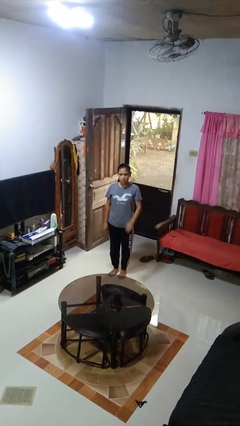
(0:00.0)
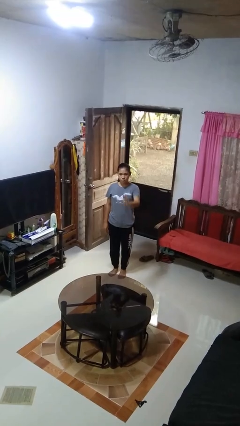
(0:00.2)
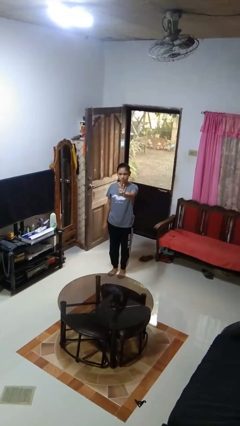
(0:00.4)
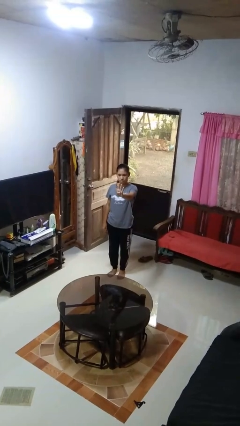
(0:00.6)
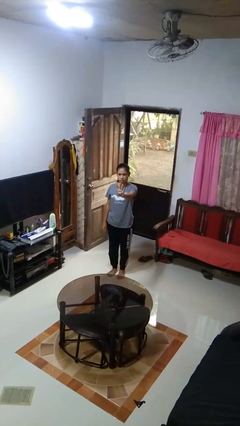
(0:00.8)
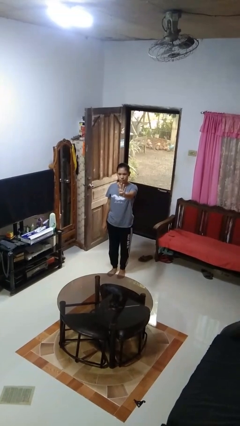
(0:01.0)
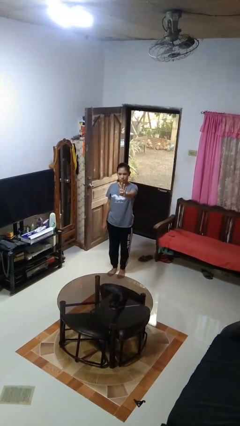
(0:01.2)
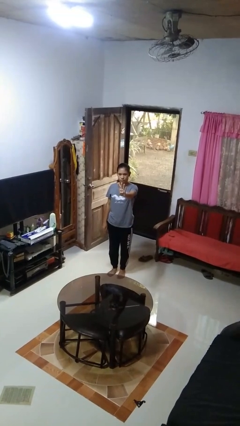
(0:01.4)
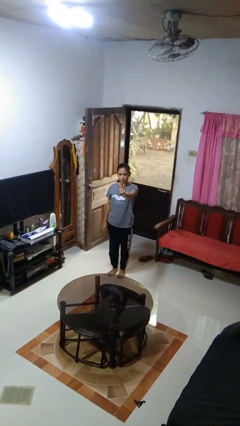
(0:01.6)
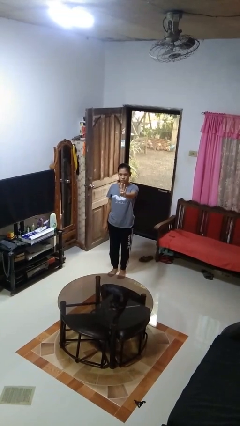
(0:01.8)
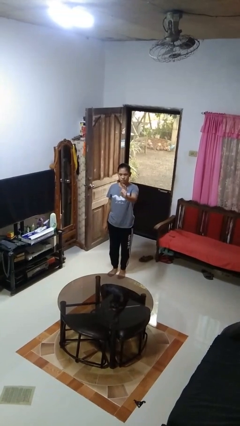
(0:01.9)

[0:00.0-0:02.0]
person gestures number four

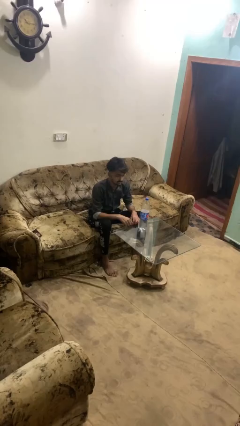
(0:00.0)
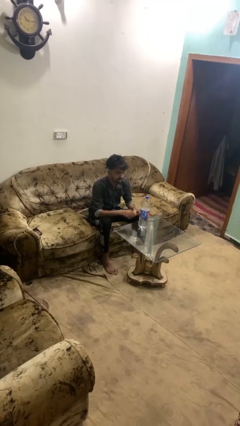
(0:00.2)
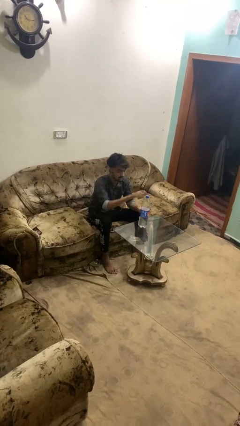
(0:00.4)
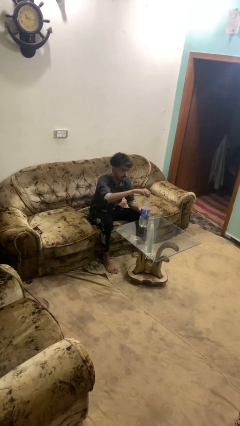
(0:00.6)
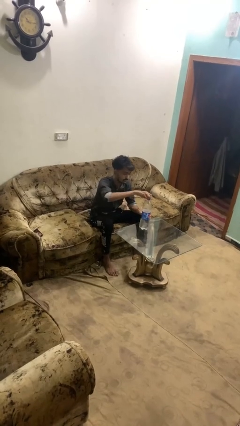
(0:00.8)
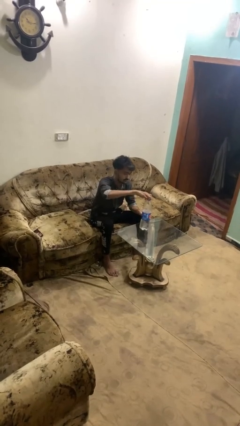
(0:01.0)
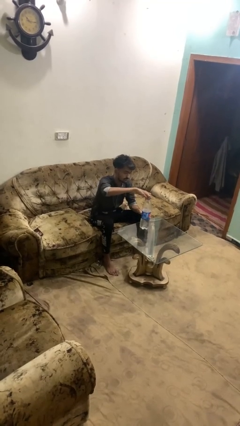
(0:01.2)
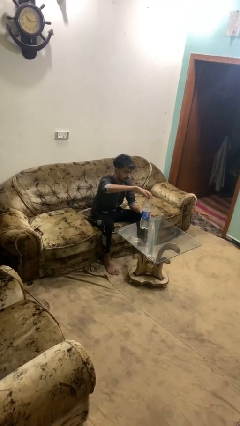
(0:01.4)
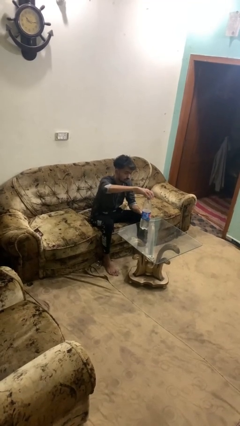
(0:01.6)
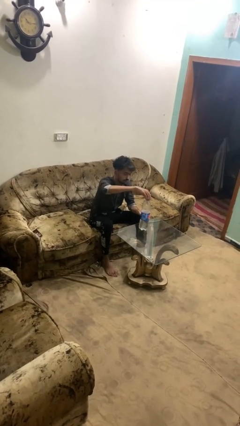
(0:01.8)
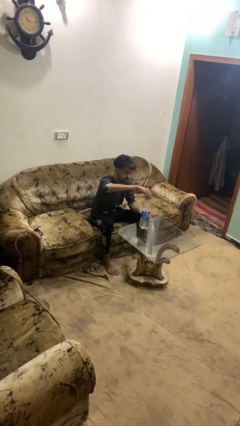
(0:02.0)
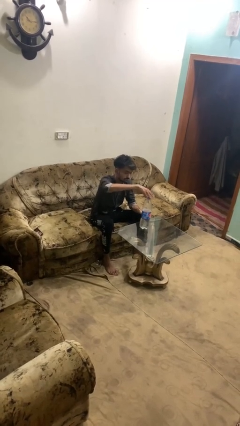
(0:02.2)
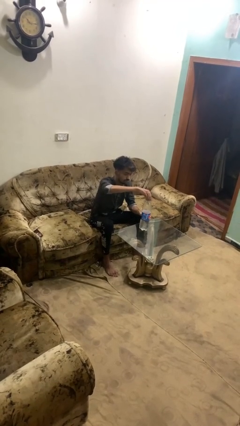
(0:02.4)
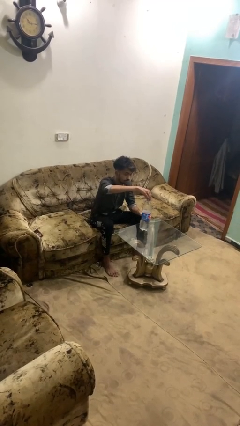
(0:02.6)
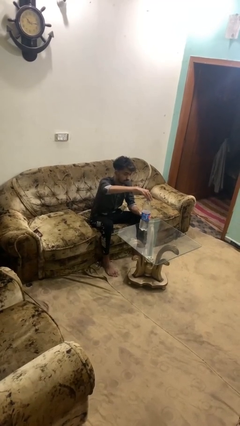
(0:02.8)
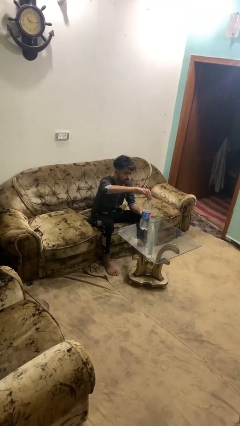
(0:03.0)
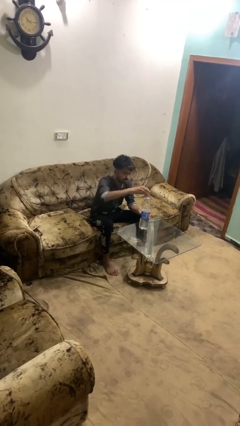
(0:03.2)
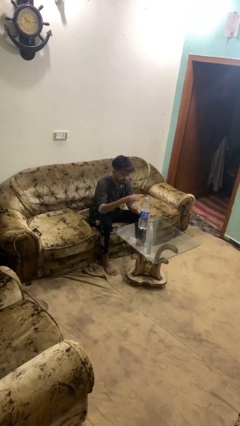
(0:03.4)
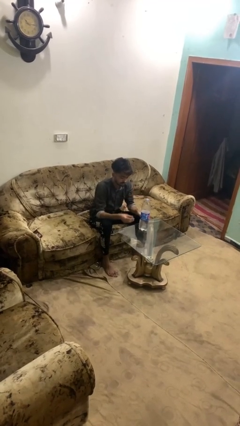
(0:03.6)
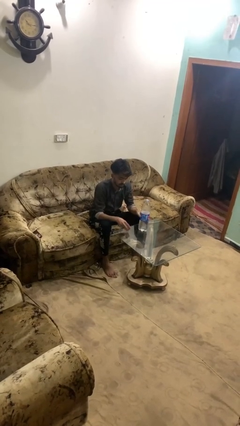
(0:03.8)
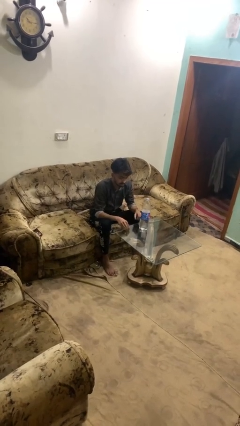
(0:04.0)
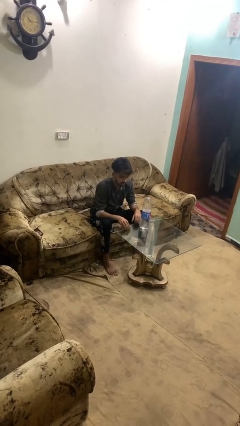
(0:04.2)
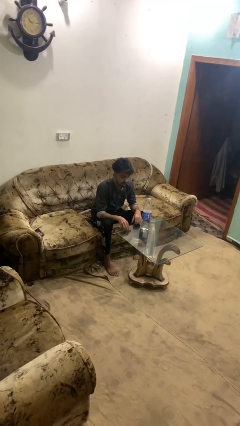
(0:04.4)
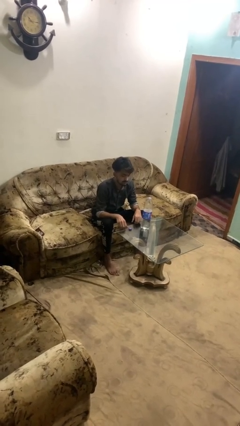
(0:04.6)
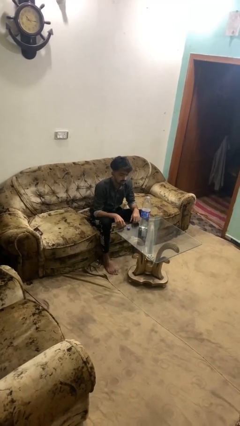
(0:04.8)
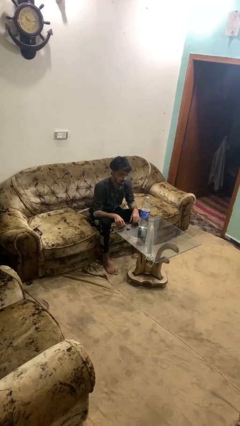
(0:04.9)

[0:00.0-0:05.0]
person unscrews lid from bottle

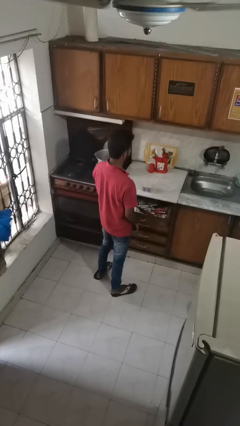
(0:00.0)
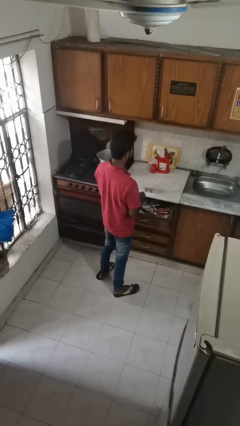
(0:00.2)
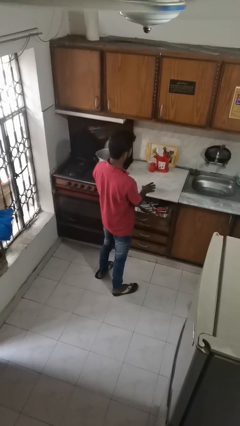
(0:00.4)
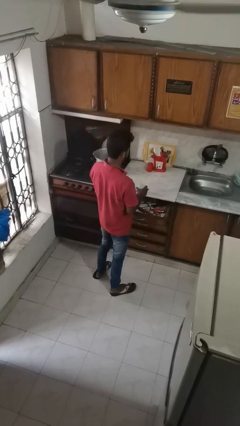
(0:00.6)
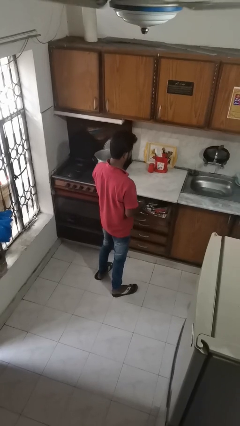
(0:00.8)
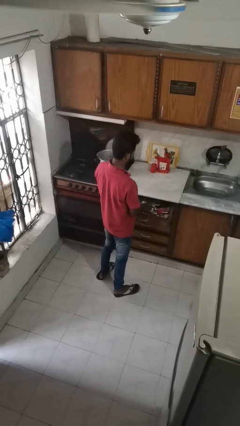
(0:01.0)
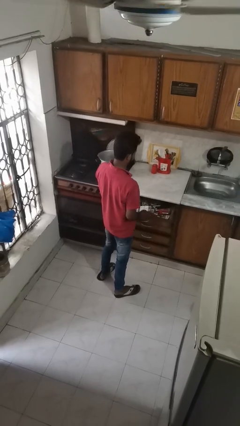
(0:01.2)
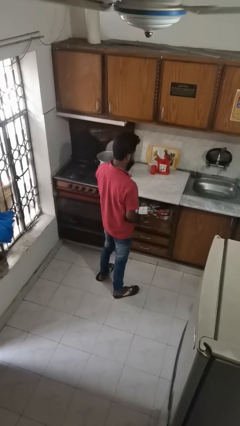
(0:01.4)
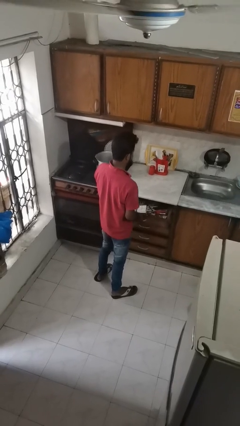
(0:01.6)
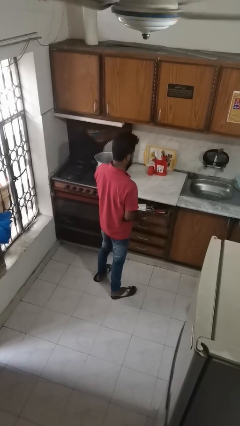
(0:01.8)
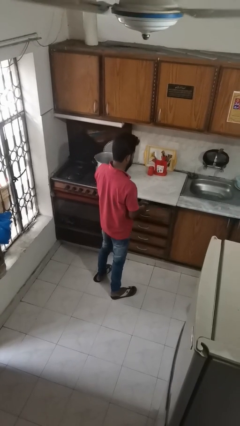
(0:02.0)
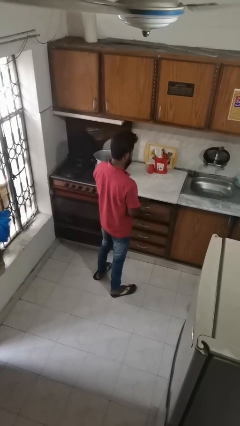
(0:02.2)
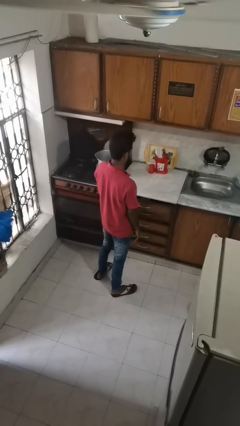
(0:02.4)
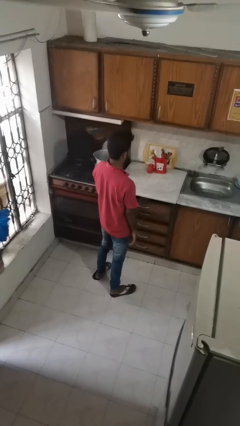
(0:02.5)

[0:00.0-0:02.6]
person puts object into kitchen drawer

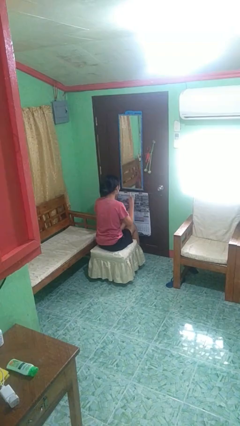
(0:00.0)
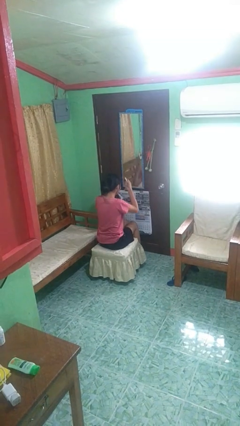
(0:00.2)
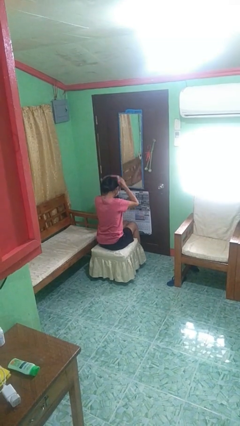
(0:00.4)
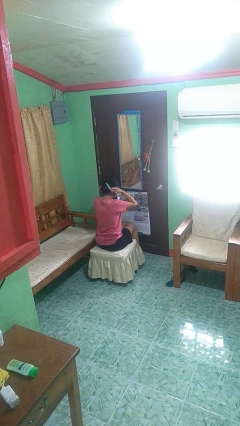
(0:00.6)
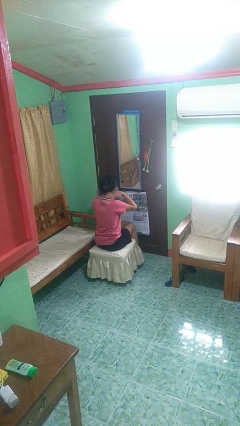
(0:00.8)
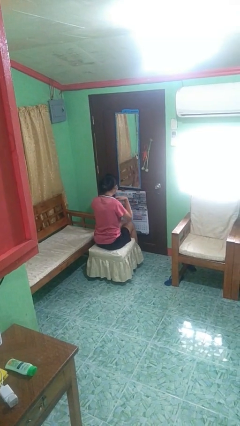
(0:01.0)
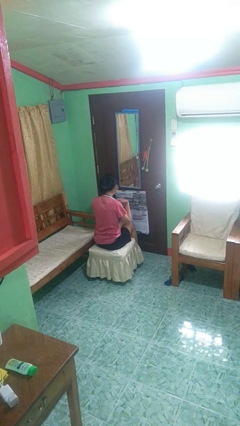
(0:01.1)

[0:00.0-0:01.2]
person puts on necklace

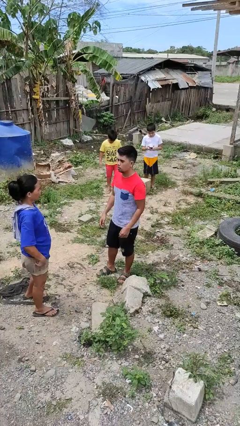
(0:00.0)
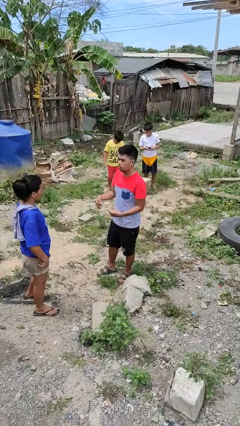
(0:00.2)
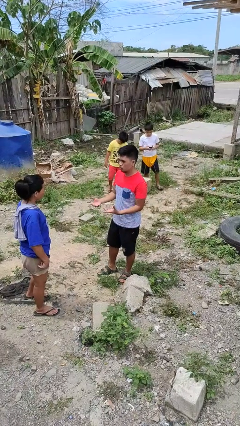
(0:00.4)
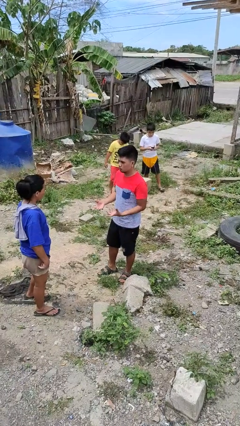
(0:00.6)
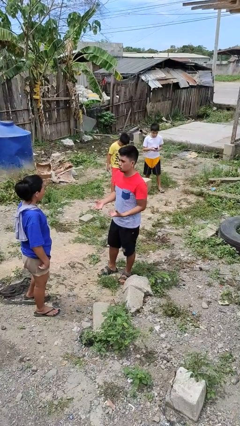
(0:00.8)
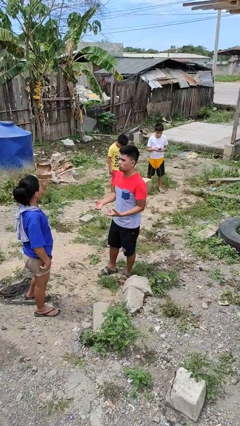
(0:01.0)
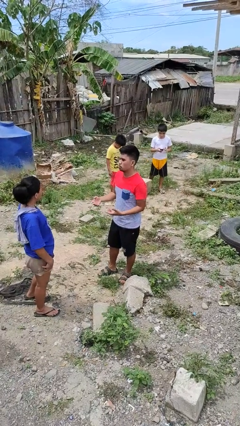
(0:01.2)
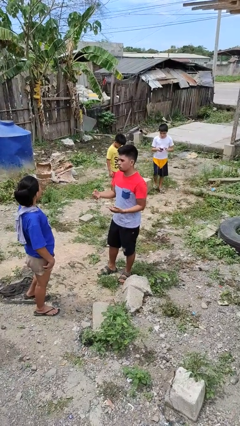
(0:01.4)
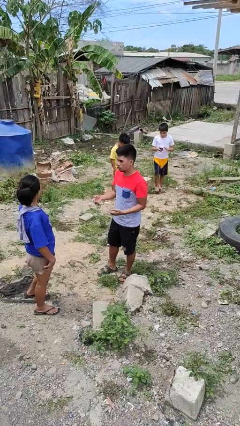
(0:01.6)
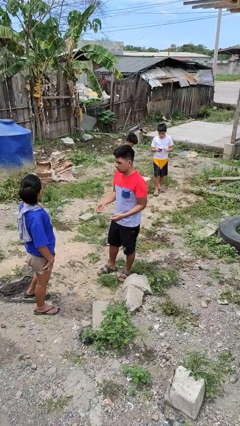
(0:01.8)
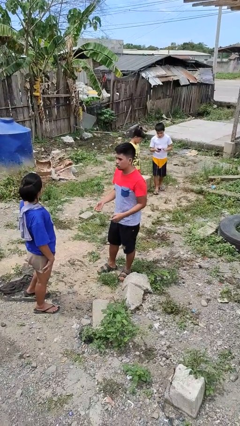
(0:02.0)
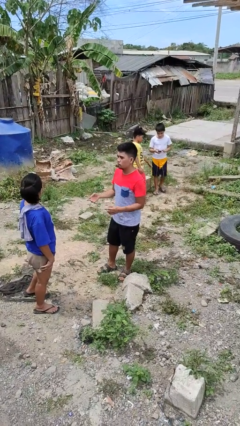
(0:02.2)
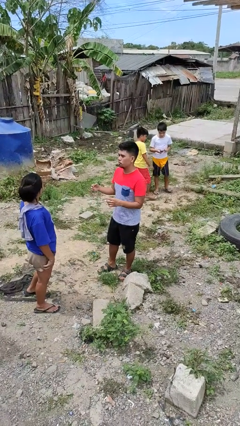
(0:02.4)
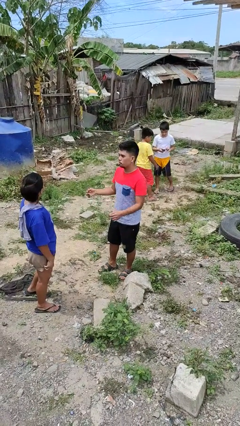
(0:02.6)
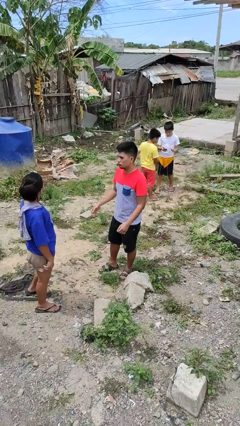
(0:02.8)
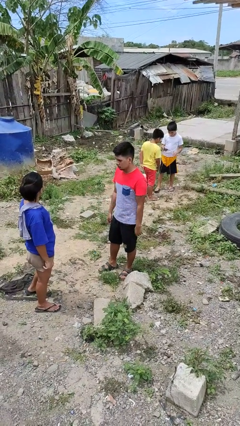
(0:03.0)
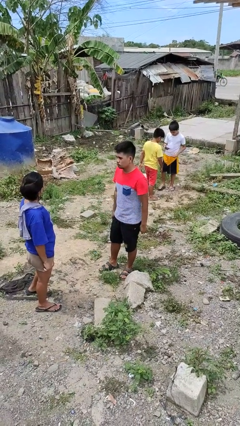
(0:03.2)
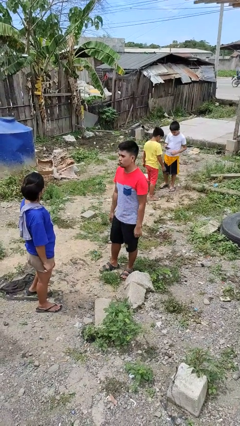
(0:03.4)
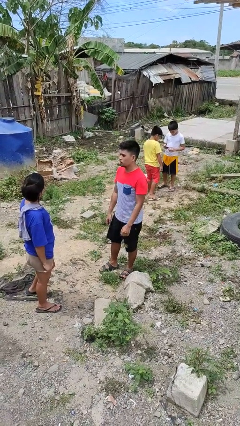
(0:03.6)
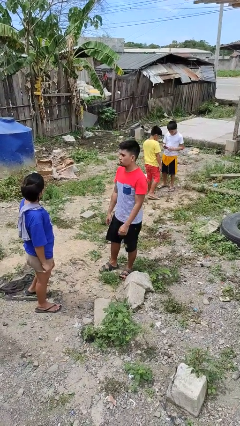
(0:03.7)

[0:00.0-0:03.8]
person talks to person

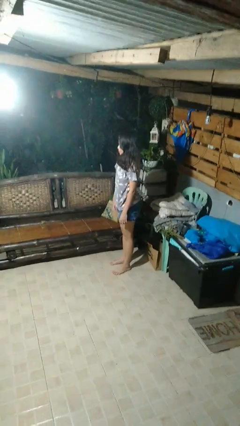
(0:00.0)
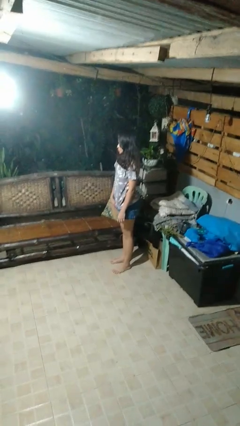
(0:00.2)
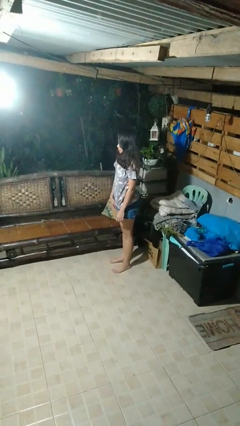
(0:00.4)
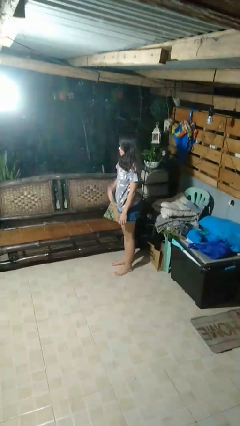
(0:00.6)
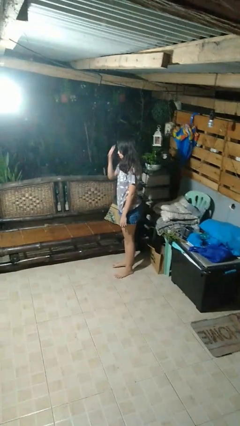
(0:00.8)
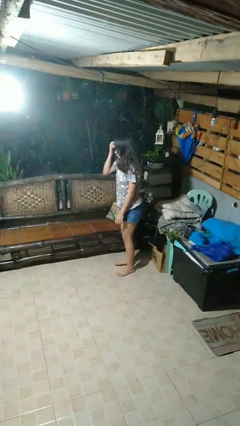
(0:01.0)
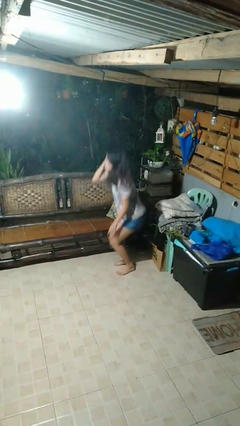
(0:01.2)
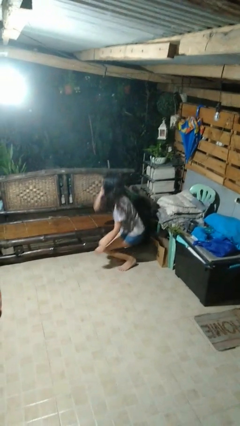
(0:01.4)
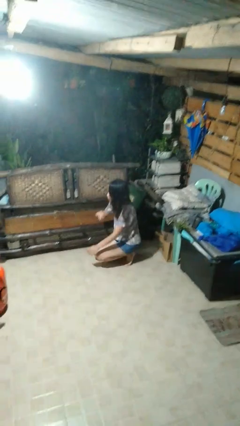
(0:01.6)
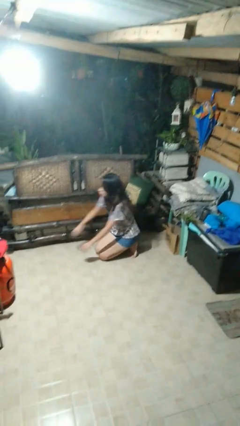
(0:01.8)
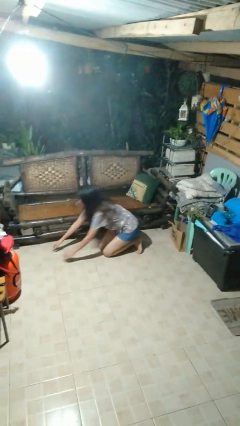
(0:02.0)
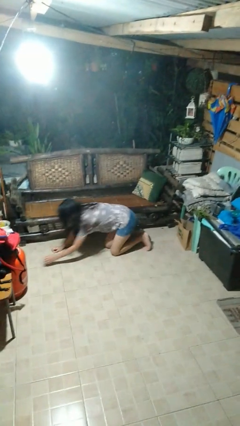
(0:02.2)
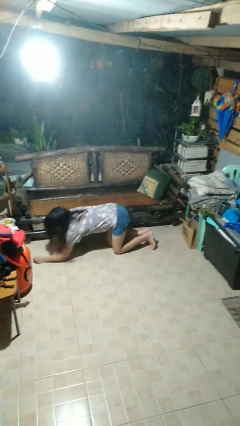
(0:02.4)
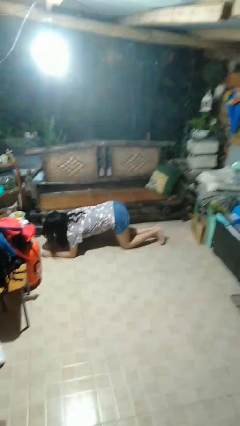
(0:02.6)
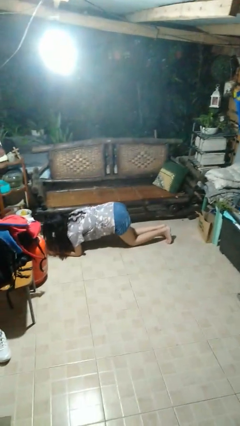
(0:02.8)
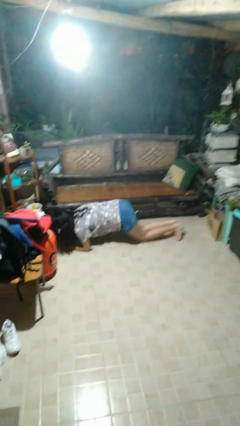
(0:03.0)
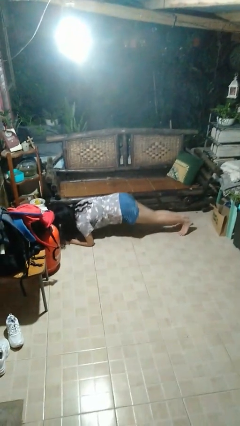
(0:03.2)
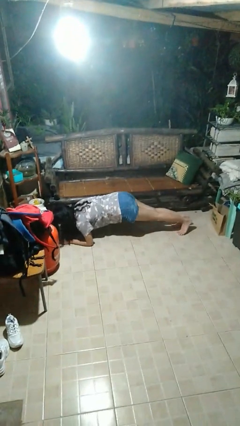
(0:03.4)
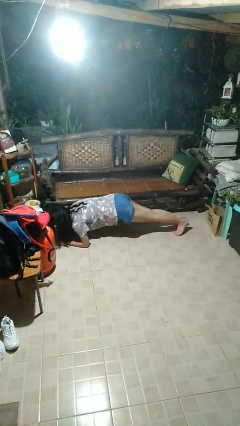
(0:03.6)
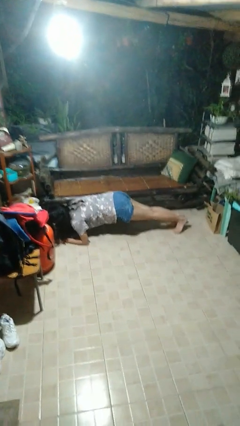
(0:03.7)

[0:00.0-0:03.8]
person exercises with plank
